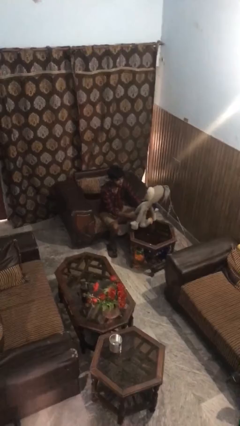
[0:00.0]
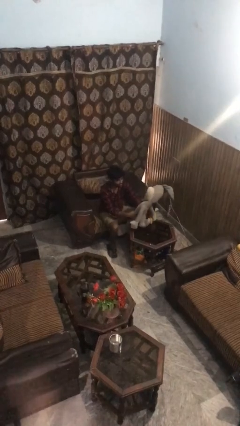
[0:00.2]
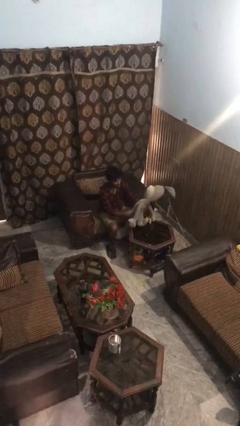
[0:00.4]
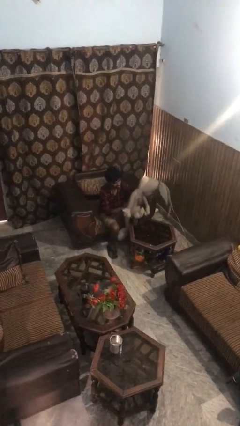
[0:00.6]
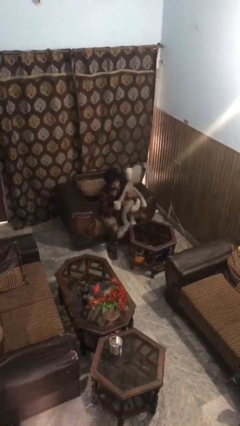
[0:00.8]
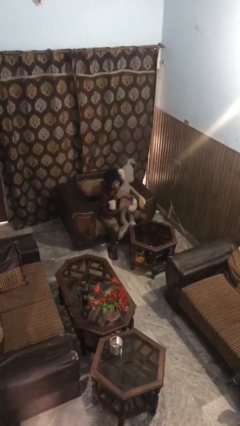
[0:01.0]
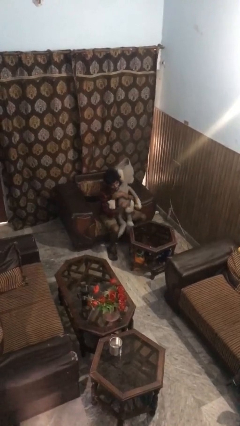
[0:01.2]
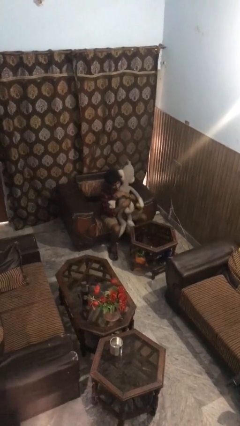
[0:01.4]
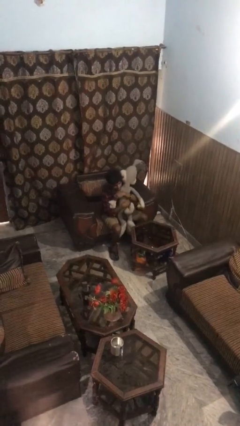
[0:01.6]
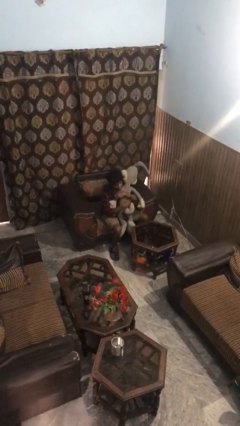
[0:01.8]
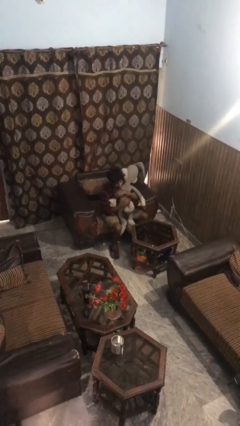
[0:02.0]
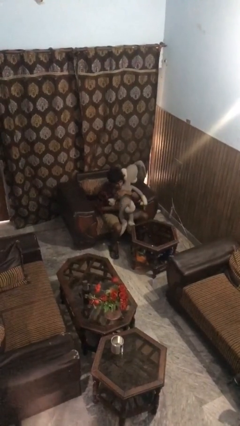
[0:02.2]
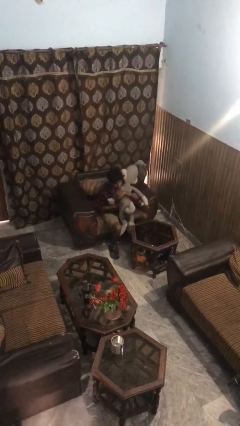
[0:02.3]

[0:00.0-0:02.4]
person hugs stuffed animal

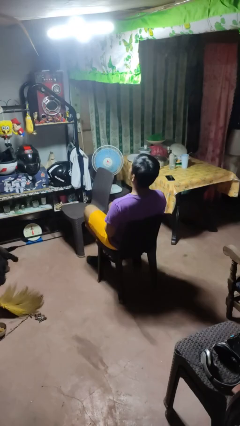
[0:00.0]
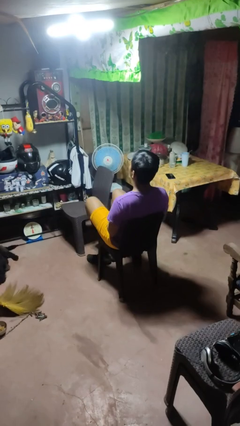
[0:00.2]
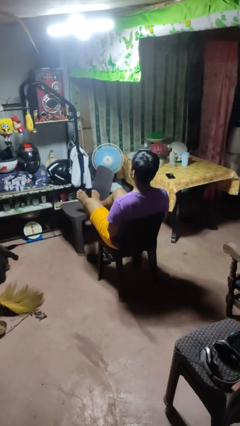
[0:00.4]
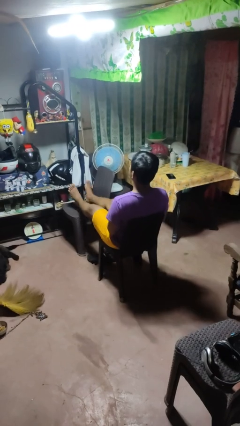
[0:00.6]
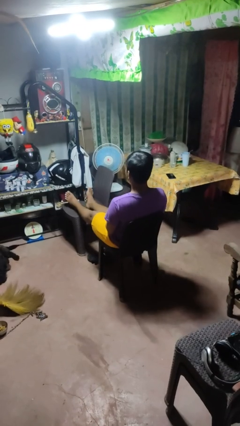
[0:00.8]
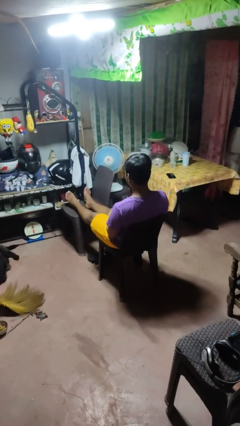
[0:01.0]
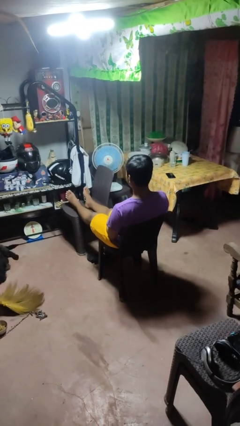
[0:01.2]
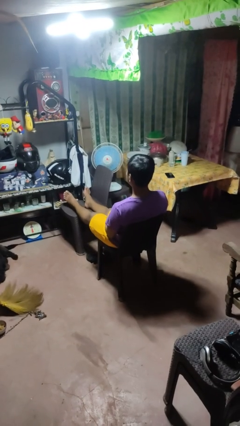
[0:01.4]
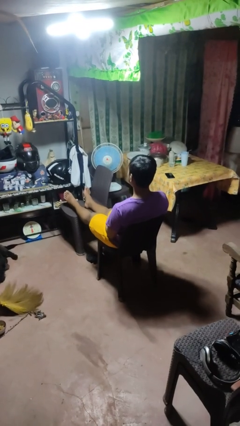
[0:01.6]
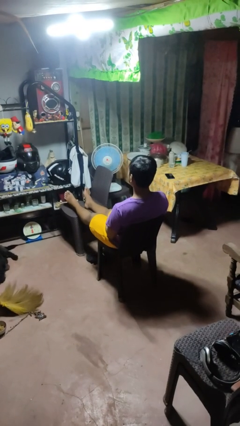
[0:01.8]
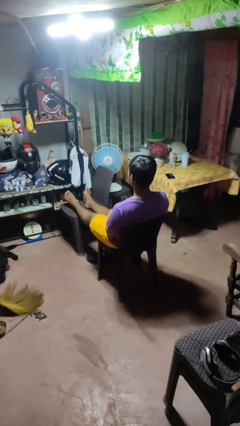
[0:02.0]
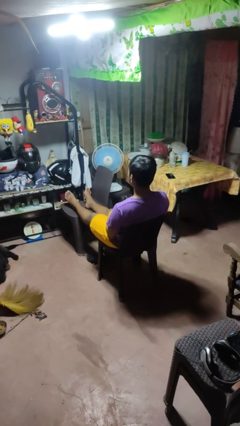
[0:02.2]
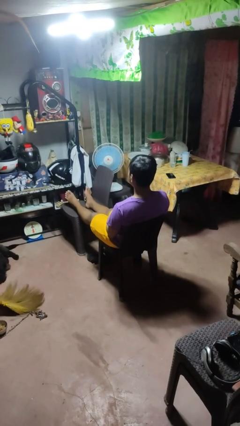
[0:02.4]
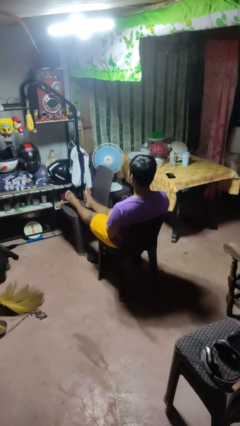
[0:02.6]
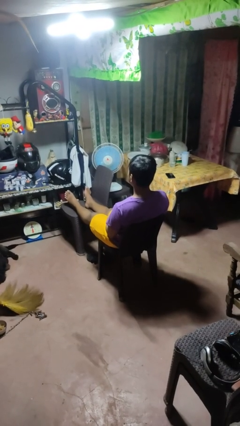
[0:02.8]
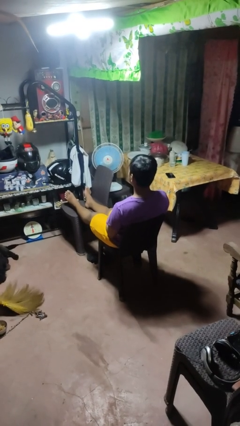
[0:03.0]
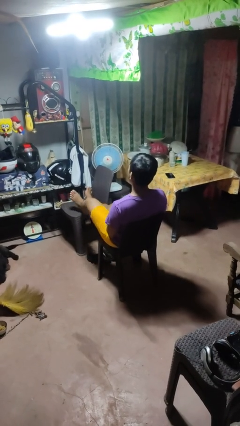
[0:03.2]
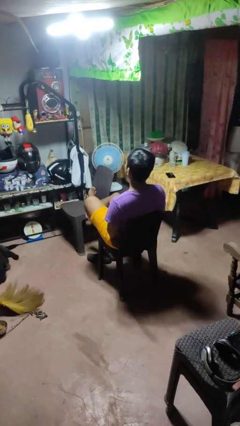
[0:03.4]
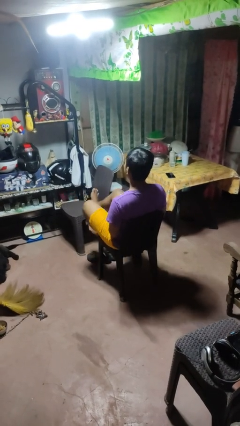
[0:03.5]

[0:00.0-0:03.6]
person puts feet up

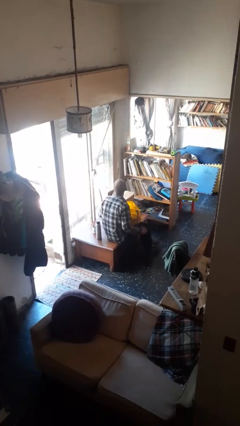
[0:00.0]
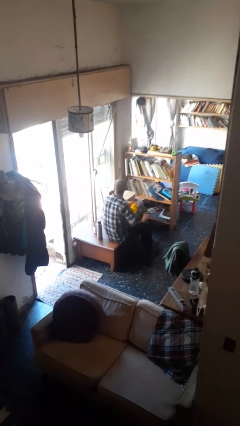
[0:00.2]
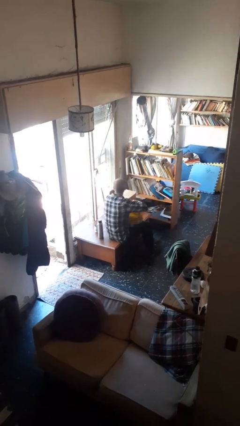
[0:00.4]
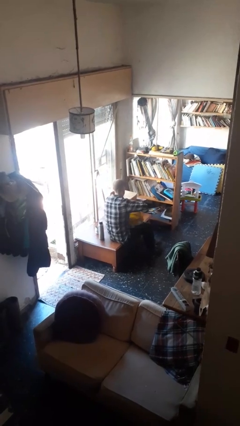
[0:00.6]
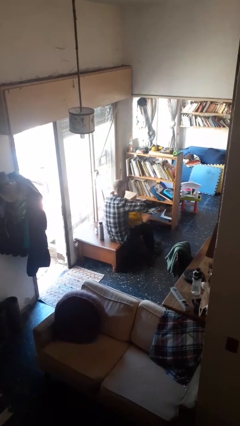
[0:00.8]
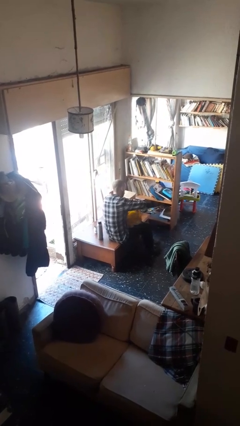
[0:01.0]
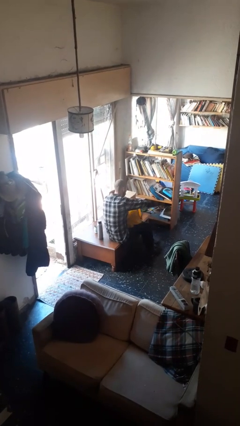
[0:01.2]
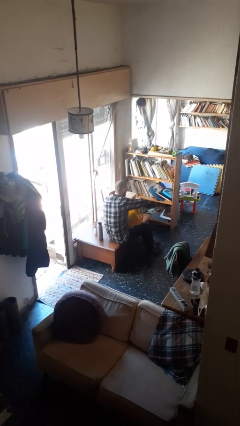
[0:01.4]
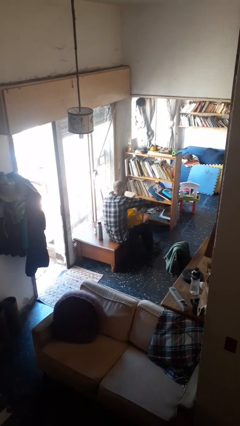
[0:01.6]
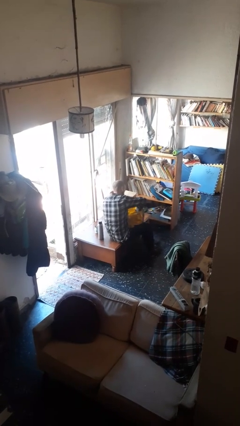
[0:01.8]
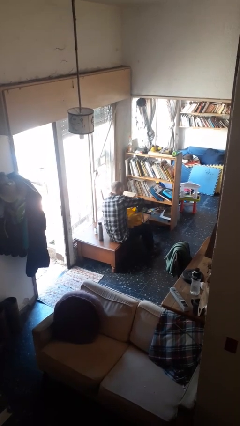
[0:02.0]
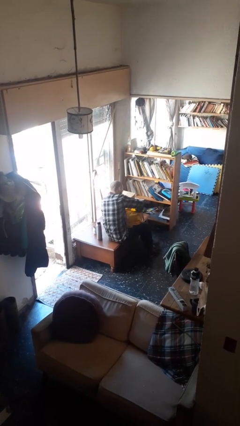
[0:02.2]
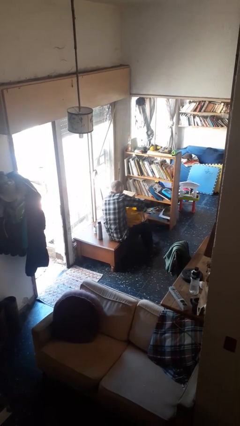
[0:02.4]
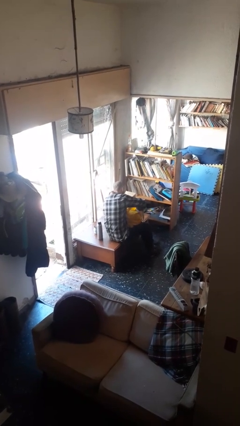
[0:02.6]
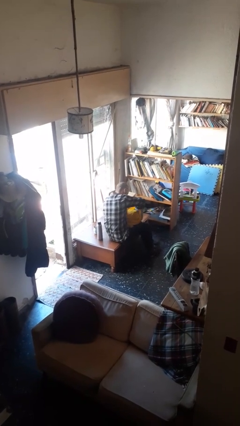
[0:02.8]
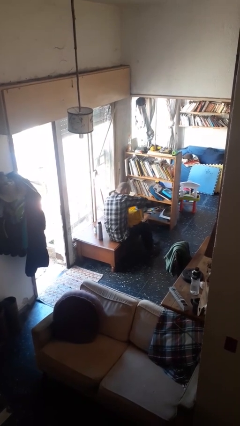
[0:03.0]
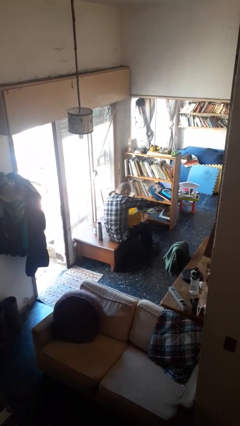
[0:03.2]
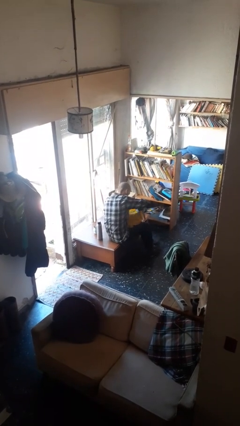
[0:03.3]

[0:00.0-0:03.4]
person searches in bag

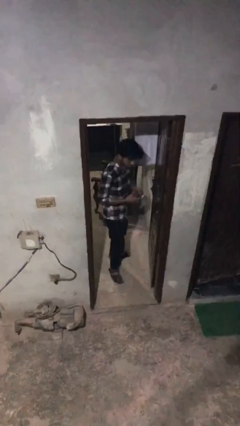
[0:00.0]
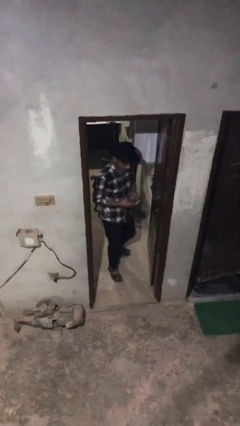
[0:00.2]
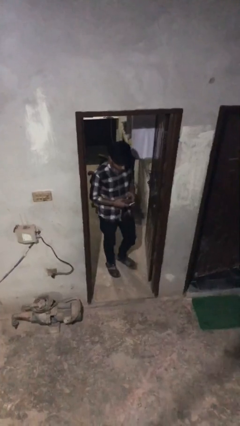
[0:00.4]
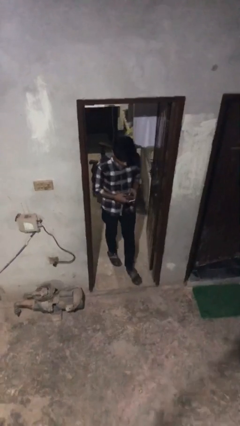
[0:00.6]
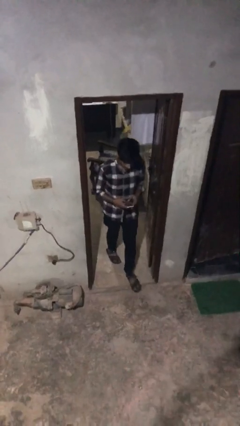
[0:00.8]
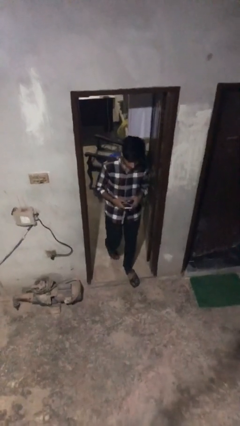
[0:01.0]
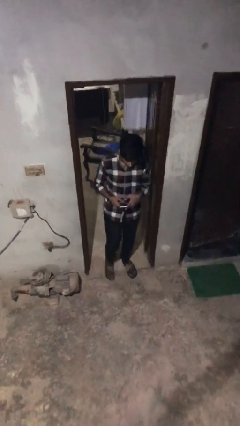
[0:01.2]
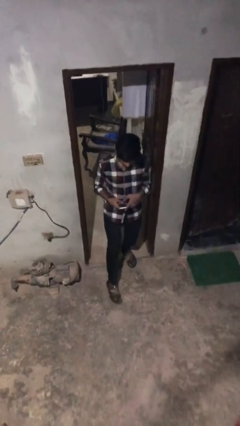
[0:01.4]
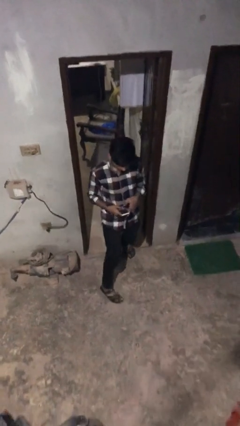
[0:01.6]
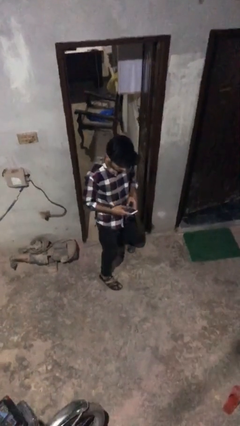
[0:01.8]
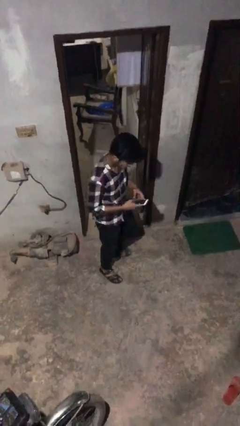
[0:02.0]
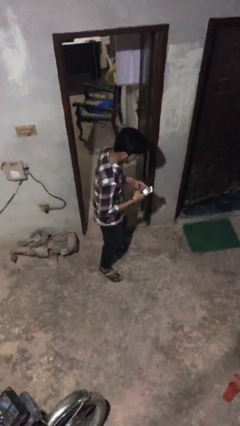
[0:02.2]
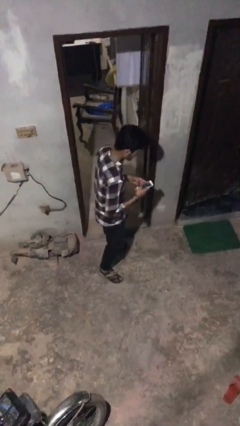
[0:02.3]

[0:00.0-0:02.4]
person enters scene through structure

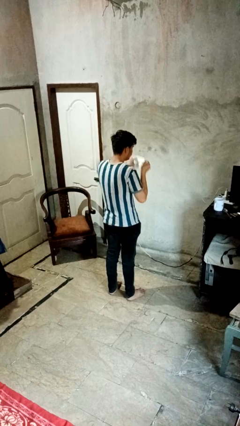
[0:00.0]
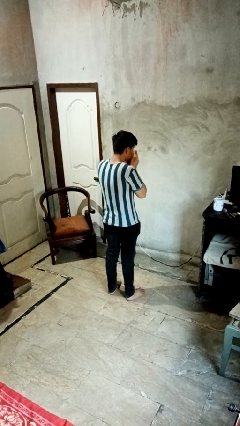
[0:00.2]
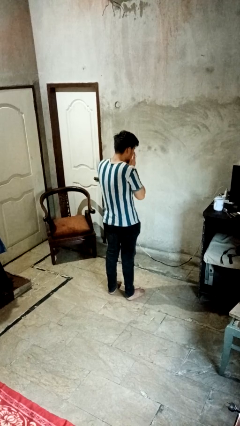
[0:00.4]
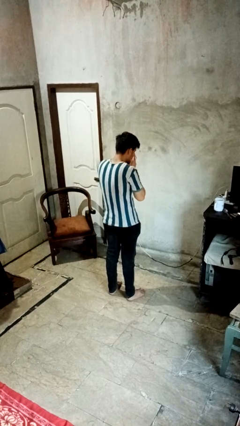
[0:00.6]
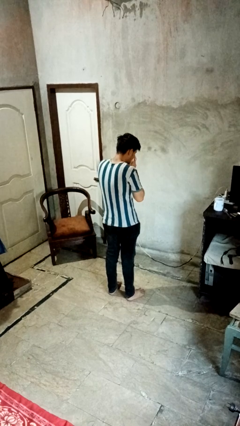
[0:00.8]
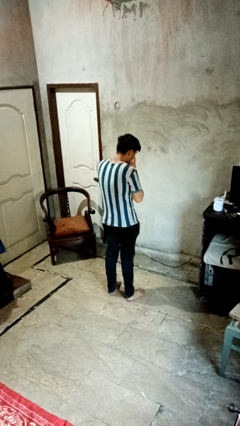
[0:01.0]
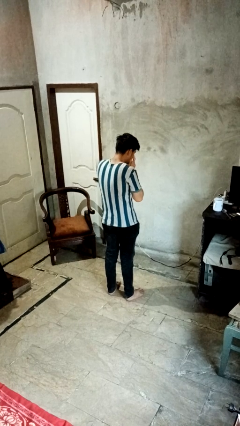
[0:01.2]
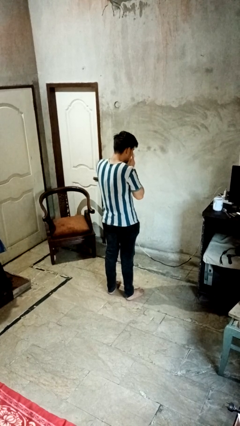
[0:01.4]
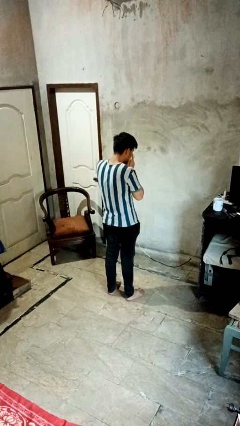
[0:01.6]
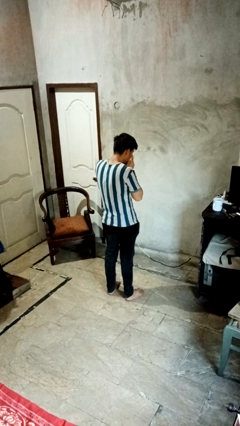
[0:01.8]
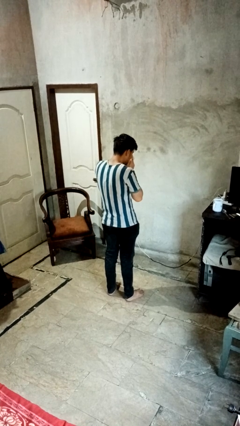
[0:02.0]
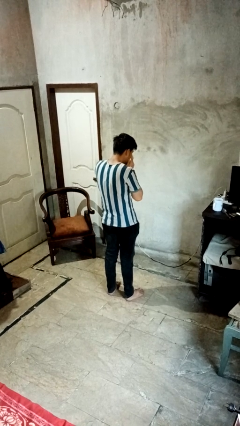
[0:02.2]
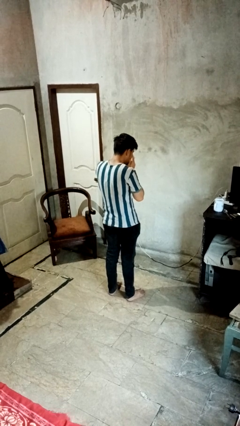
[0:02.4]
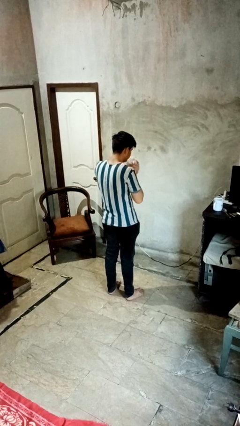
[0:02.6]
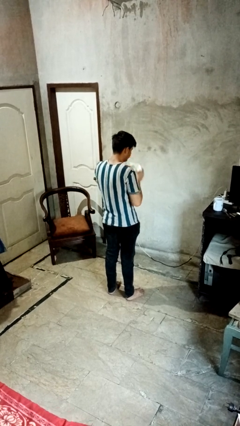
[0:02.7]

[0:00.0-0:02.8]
person blows nose

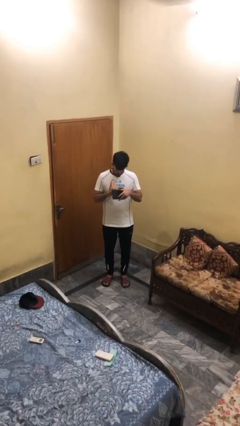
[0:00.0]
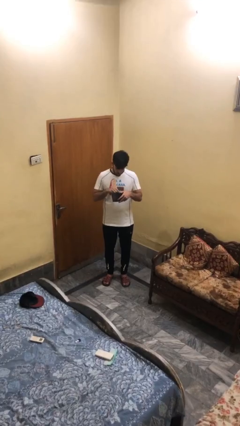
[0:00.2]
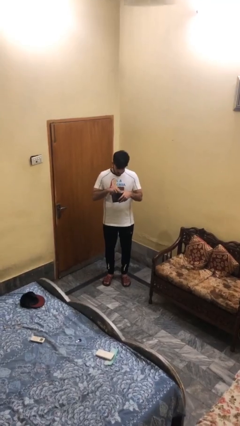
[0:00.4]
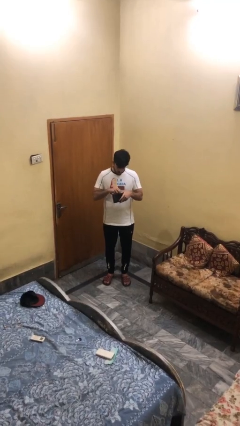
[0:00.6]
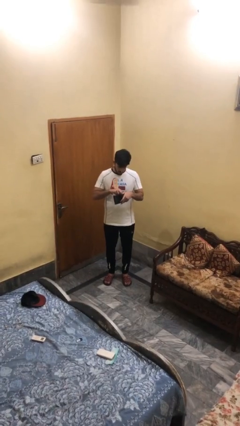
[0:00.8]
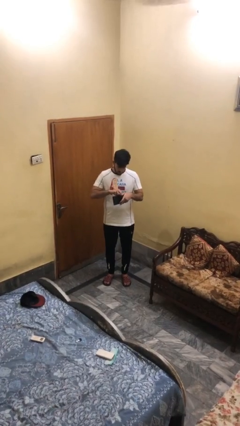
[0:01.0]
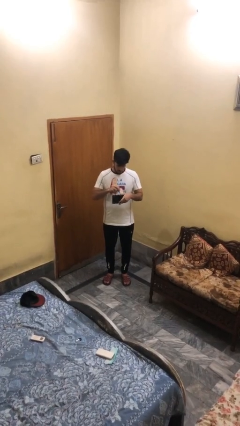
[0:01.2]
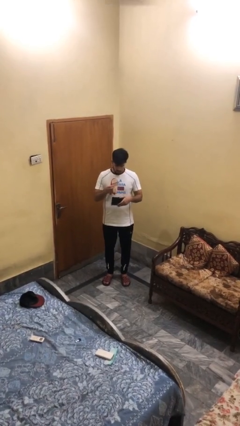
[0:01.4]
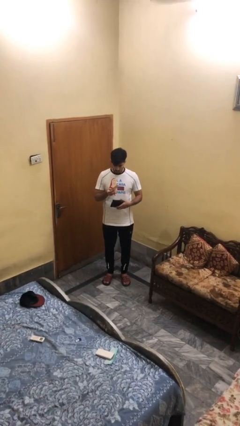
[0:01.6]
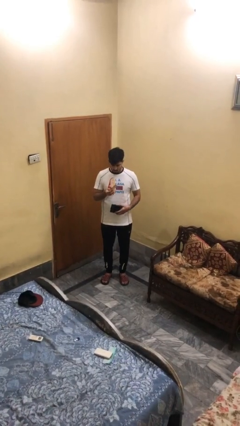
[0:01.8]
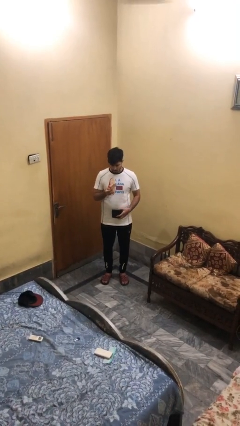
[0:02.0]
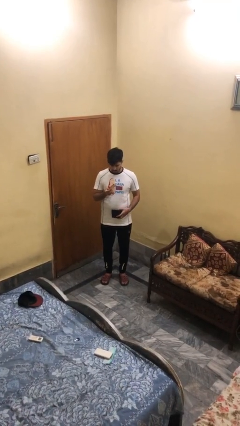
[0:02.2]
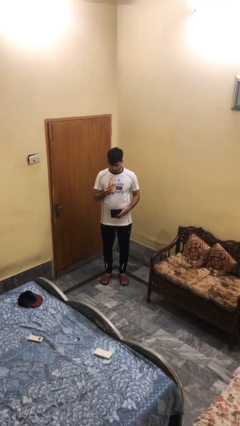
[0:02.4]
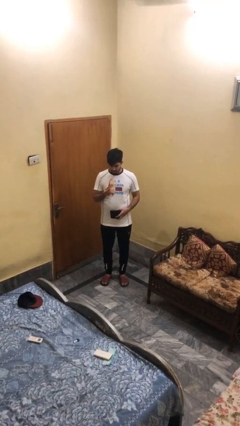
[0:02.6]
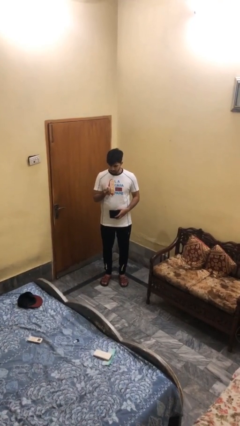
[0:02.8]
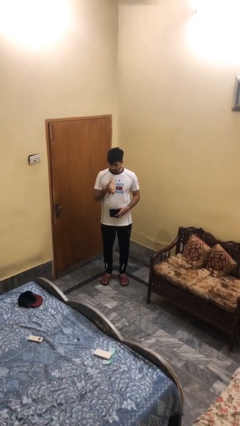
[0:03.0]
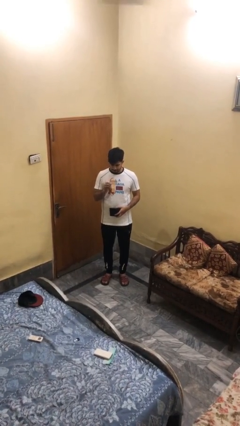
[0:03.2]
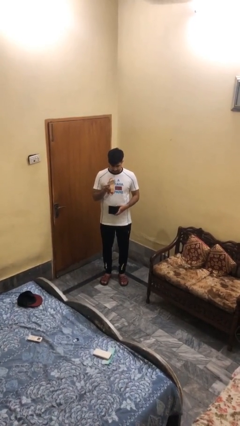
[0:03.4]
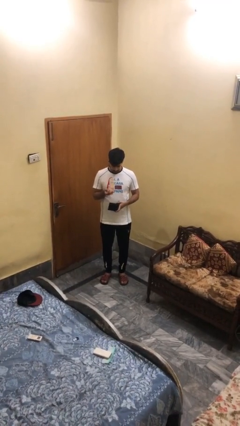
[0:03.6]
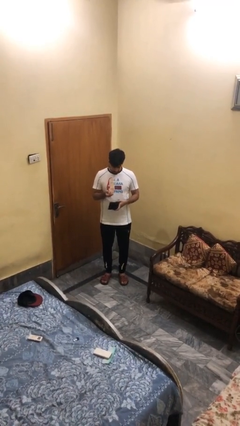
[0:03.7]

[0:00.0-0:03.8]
person takes object from purse
